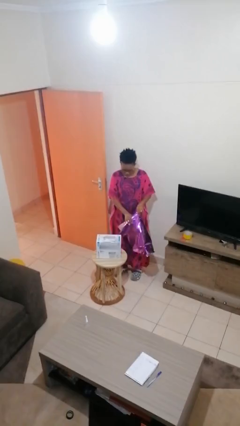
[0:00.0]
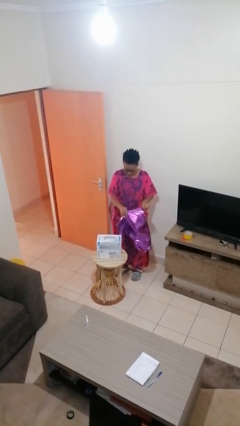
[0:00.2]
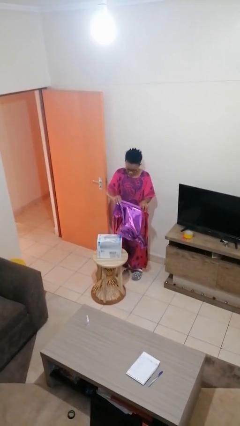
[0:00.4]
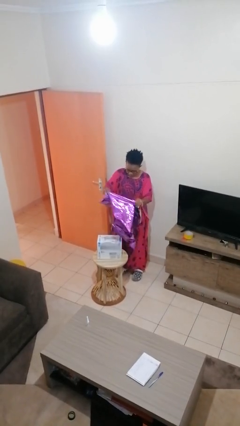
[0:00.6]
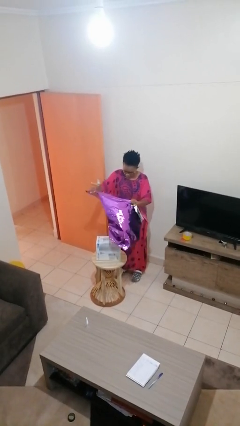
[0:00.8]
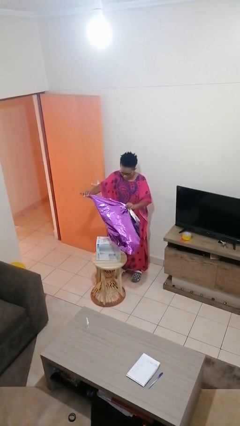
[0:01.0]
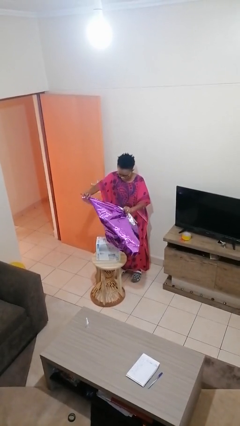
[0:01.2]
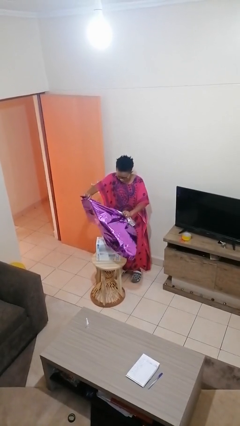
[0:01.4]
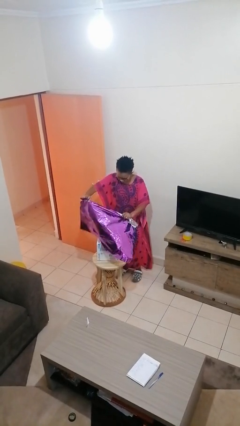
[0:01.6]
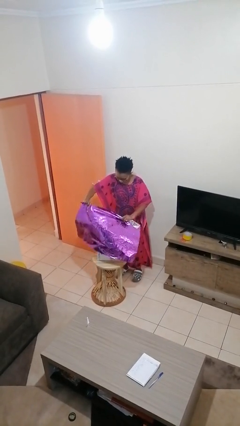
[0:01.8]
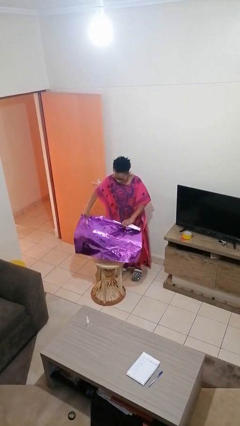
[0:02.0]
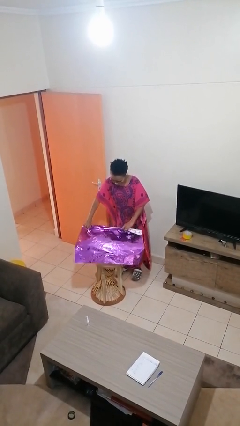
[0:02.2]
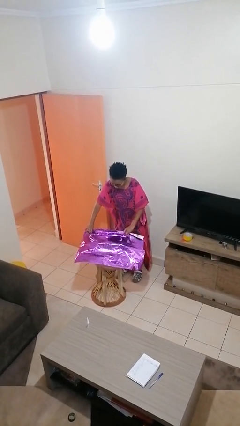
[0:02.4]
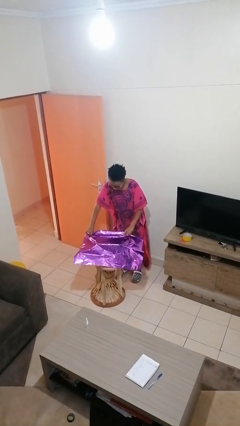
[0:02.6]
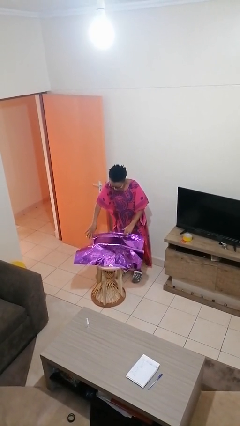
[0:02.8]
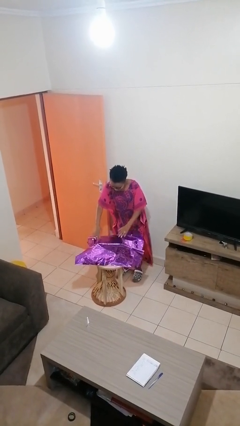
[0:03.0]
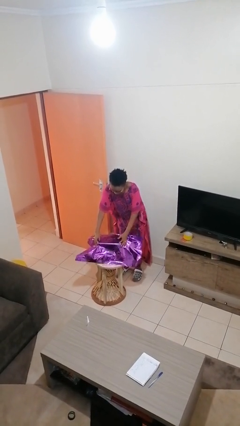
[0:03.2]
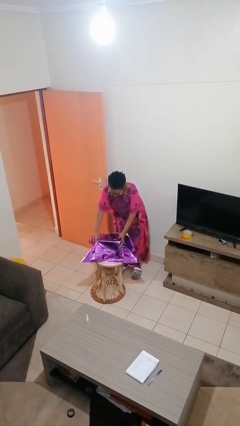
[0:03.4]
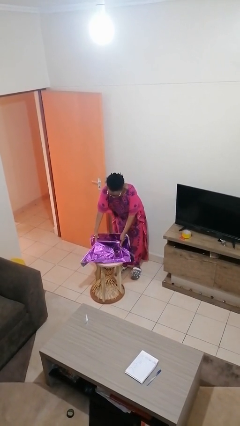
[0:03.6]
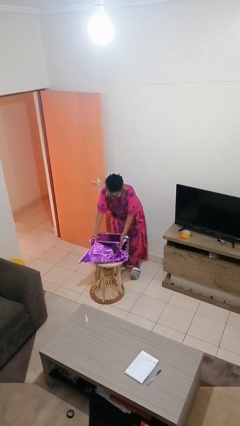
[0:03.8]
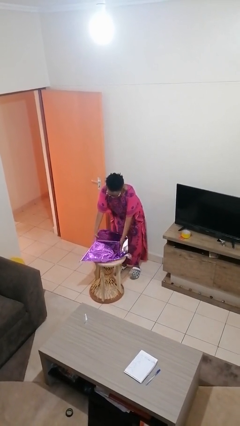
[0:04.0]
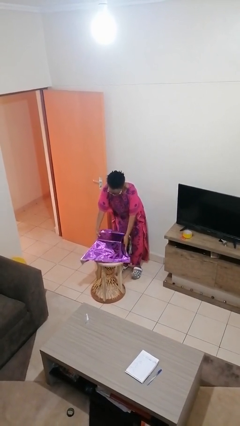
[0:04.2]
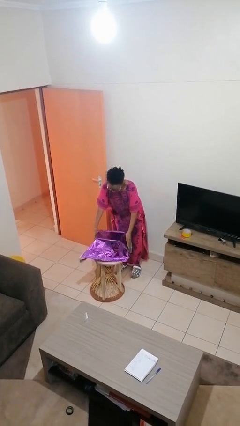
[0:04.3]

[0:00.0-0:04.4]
person wraps box

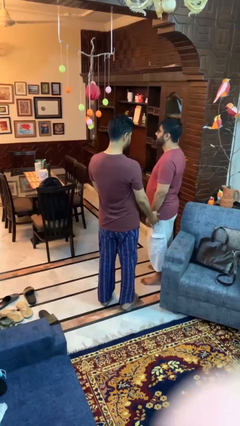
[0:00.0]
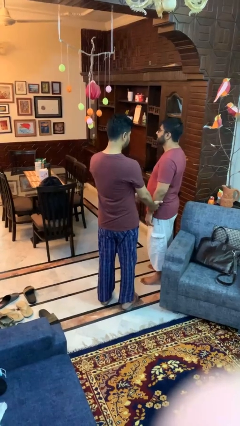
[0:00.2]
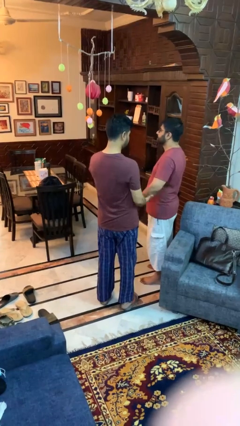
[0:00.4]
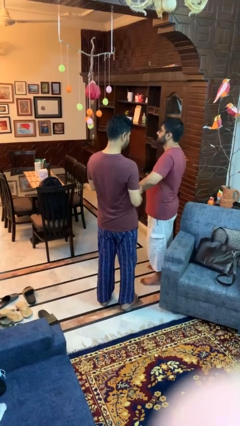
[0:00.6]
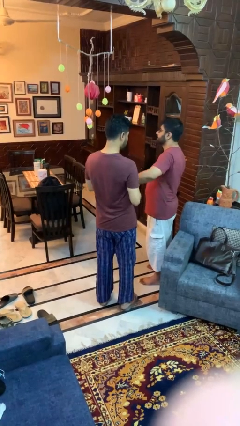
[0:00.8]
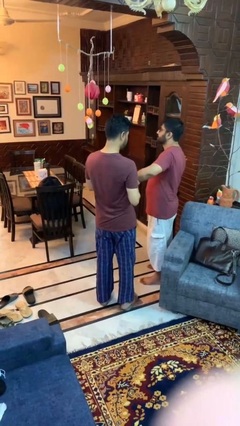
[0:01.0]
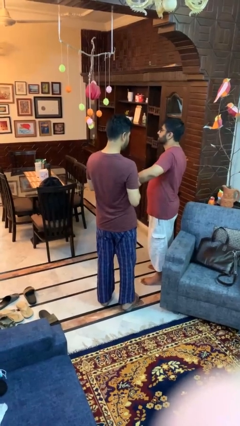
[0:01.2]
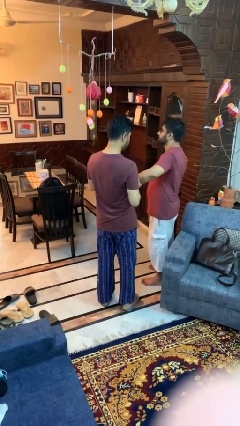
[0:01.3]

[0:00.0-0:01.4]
person grabs person by forearm

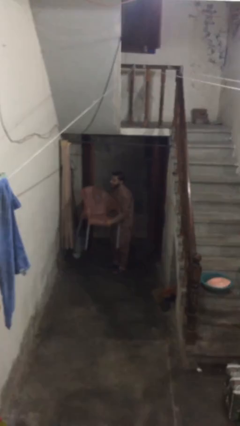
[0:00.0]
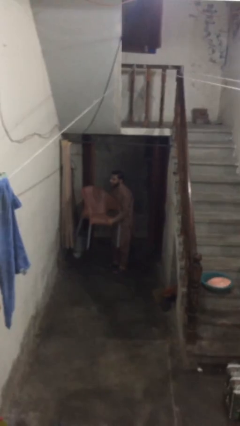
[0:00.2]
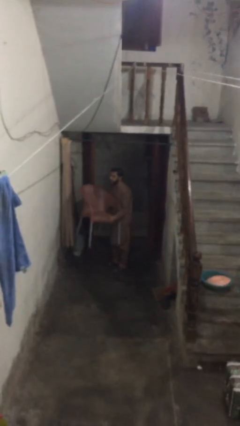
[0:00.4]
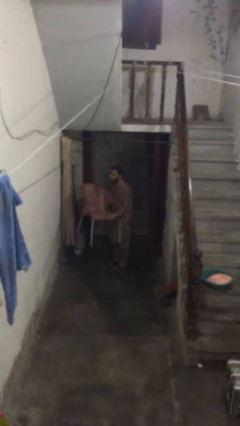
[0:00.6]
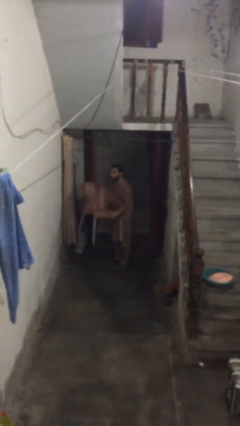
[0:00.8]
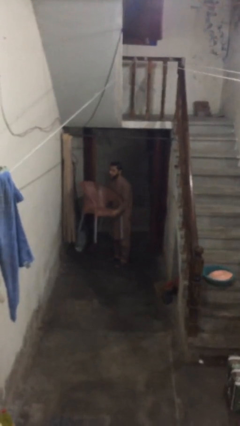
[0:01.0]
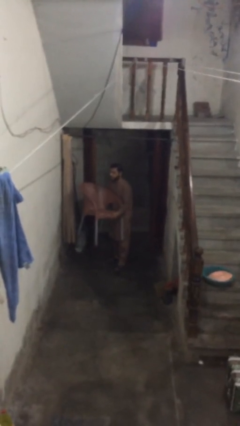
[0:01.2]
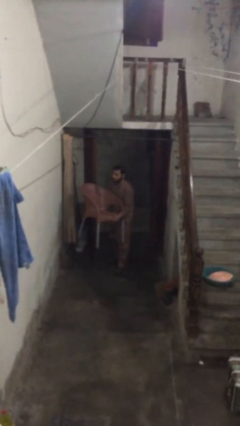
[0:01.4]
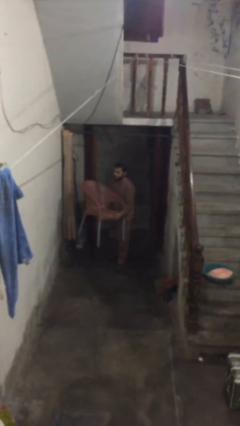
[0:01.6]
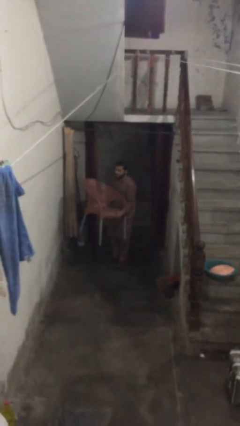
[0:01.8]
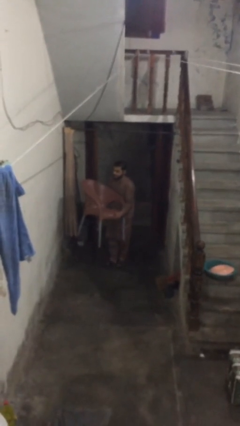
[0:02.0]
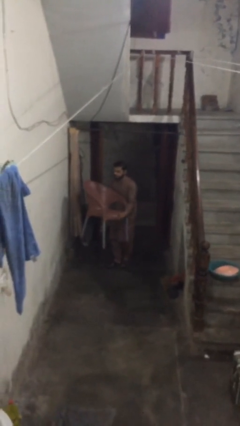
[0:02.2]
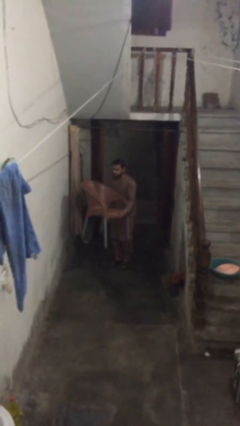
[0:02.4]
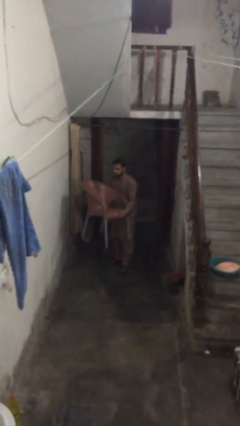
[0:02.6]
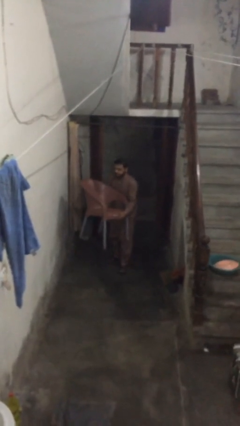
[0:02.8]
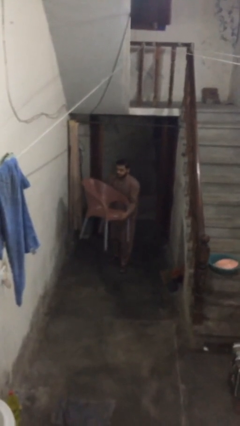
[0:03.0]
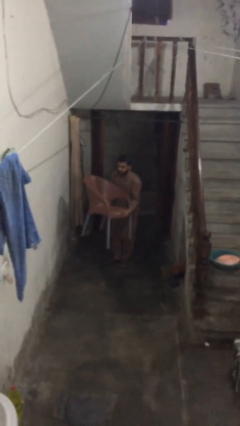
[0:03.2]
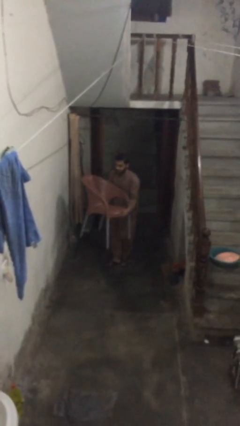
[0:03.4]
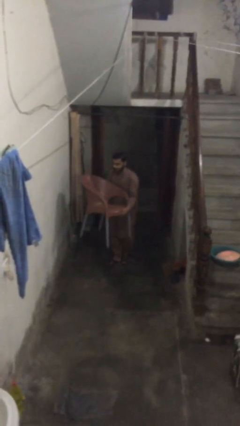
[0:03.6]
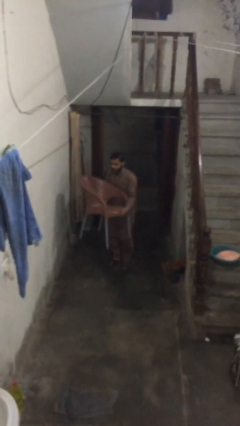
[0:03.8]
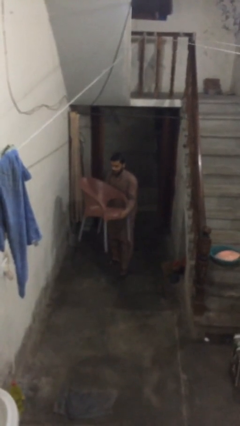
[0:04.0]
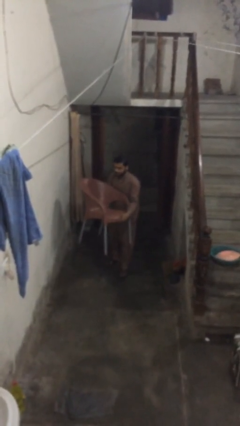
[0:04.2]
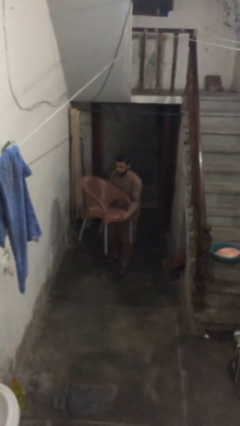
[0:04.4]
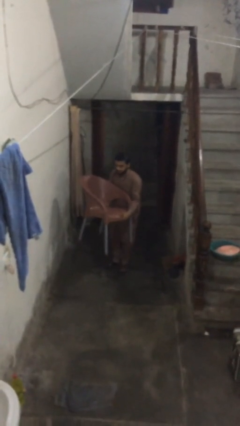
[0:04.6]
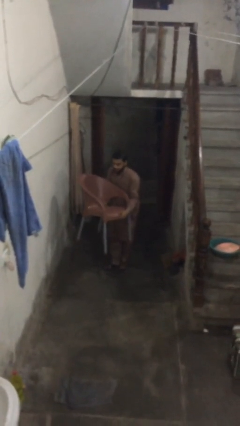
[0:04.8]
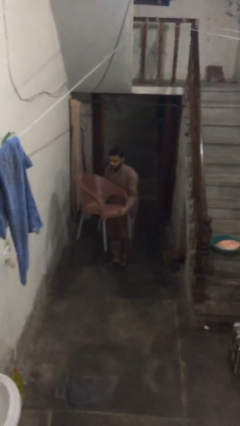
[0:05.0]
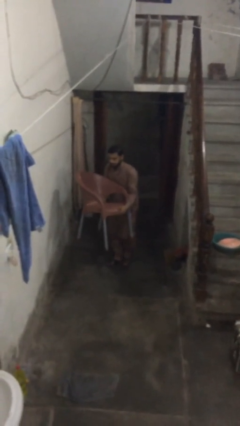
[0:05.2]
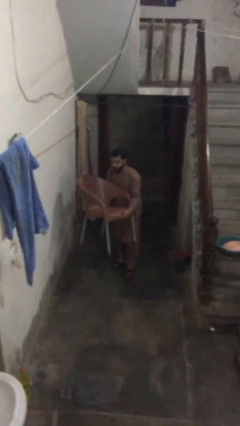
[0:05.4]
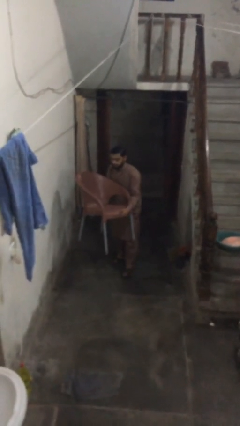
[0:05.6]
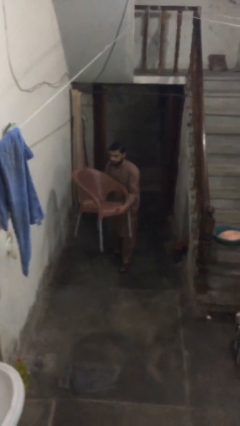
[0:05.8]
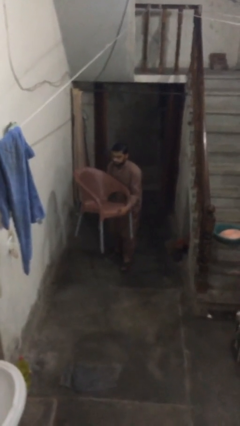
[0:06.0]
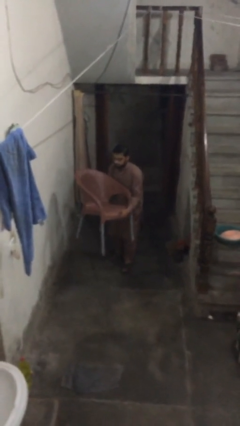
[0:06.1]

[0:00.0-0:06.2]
person carries heavy object

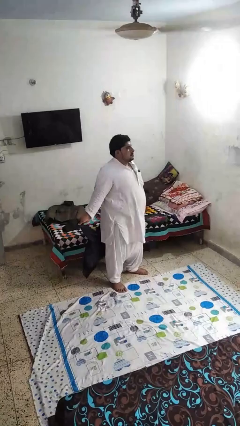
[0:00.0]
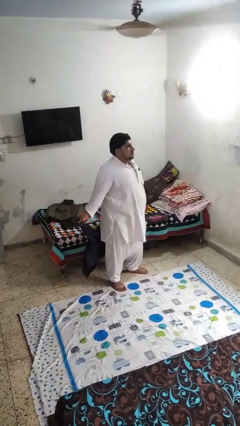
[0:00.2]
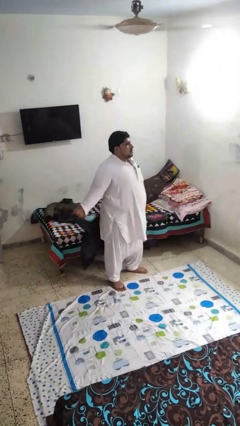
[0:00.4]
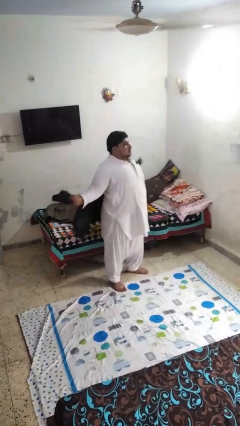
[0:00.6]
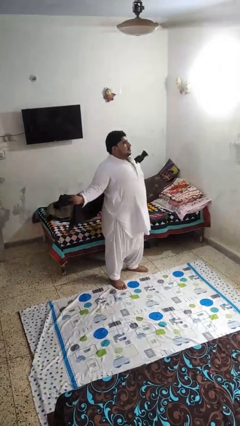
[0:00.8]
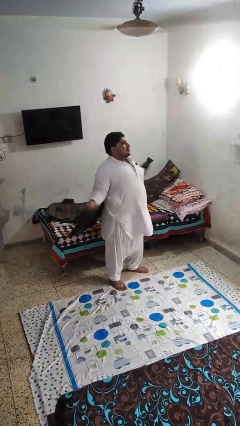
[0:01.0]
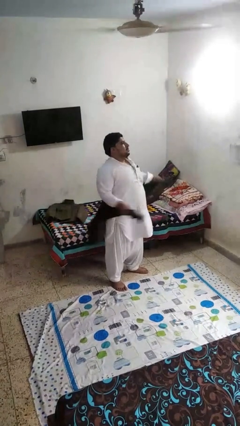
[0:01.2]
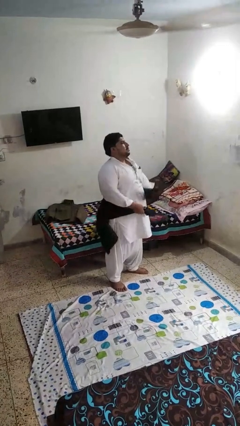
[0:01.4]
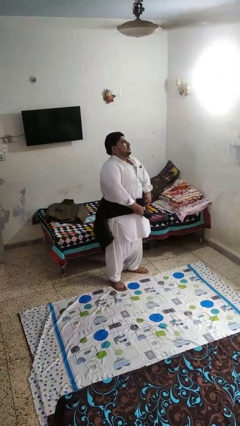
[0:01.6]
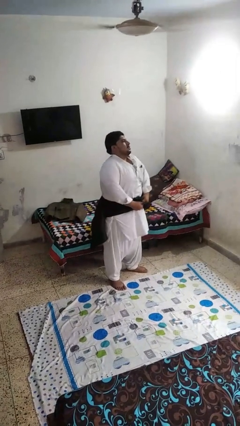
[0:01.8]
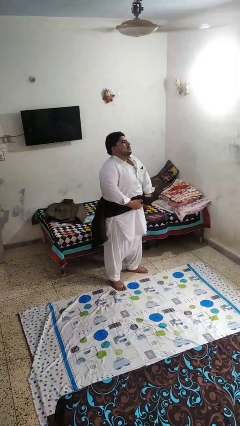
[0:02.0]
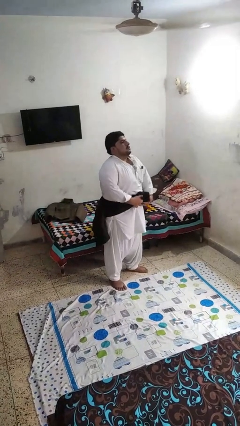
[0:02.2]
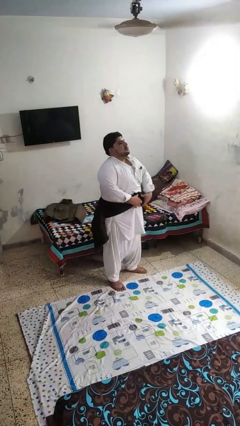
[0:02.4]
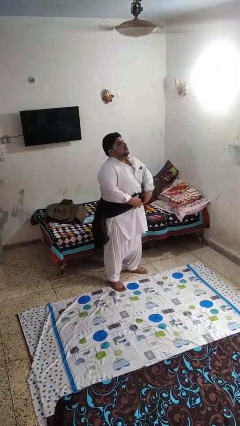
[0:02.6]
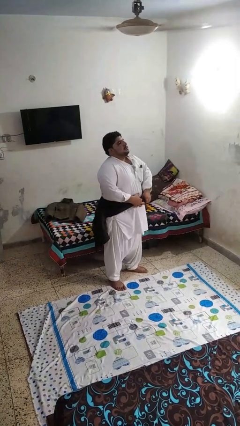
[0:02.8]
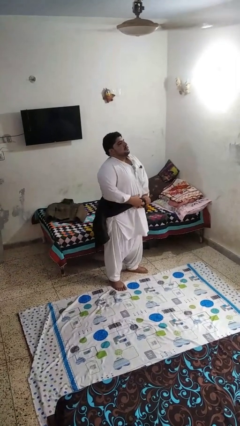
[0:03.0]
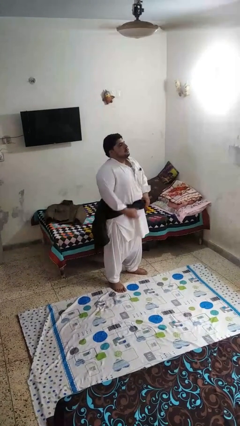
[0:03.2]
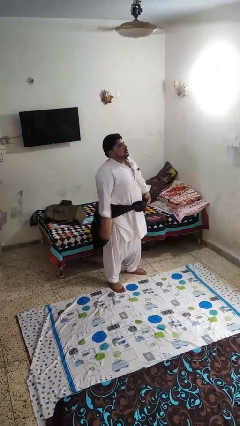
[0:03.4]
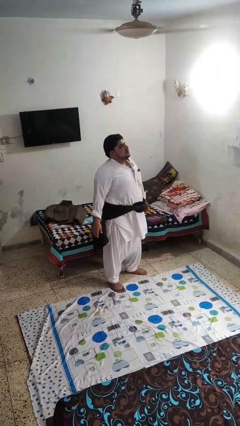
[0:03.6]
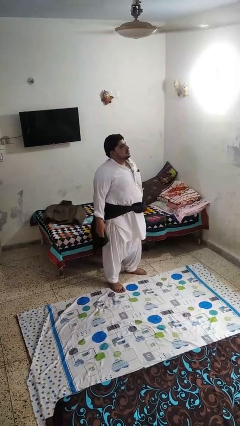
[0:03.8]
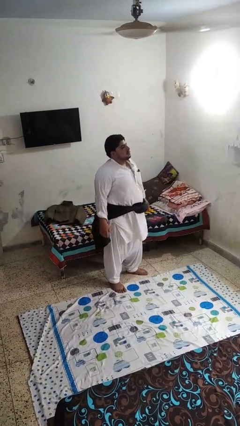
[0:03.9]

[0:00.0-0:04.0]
person ties jacket around waist

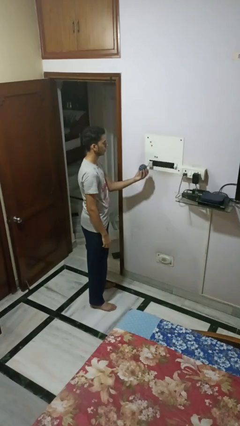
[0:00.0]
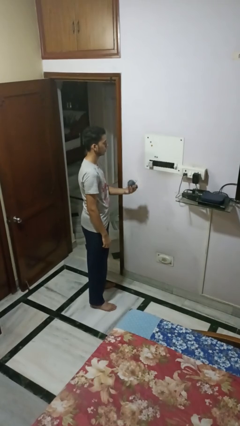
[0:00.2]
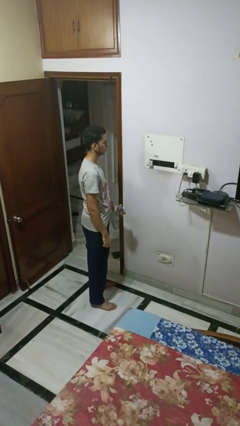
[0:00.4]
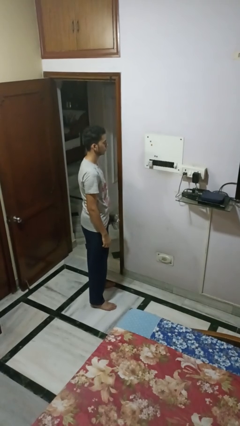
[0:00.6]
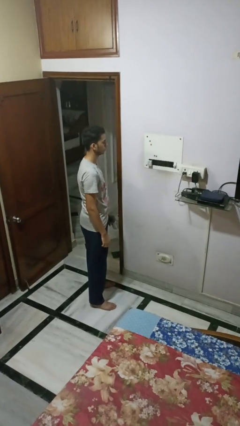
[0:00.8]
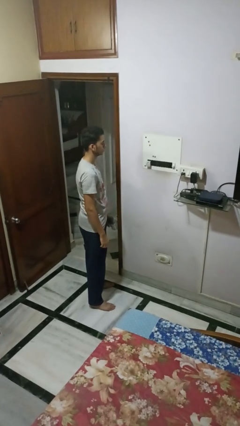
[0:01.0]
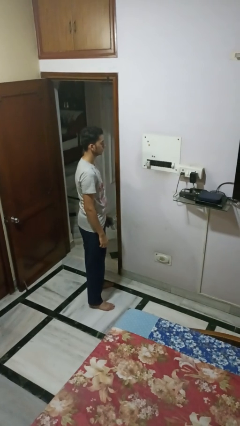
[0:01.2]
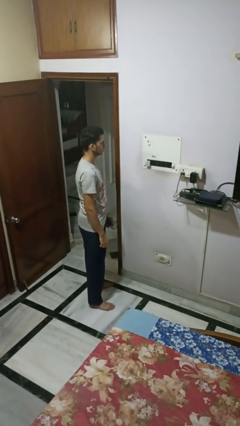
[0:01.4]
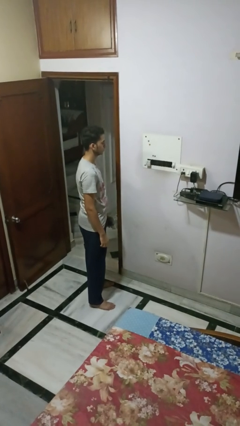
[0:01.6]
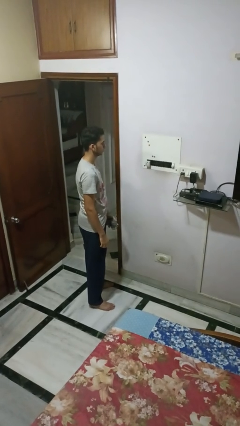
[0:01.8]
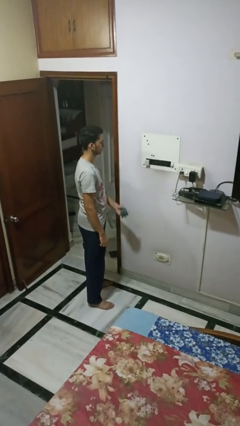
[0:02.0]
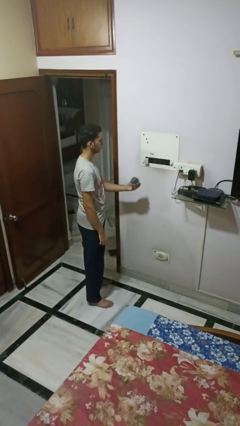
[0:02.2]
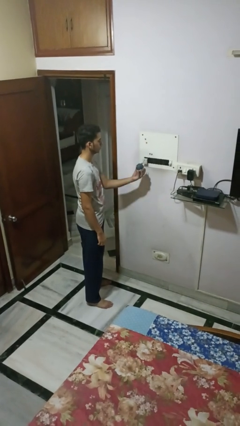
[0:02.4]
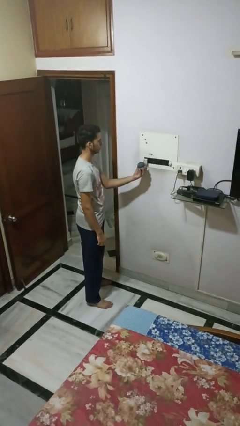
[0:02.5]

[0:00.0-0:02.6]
person unplugs from electrical socket
